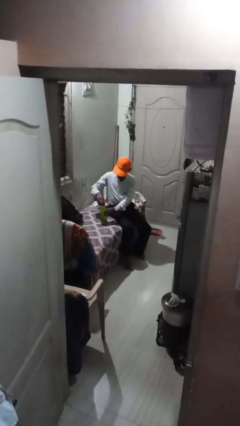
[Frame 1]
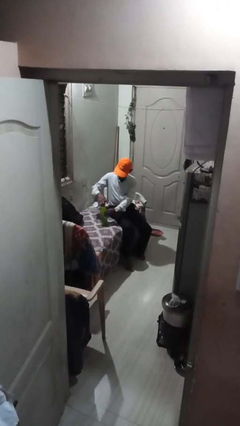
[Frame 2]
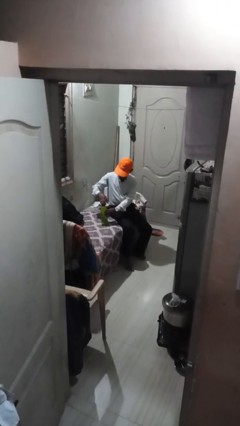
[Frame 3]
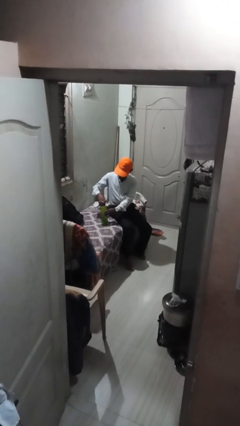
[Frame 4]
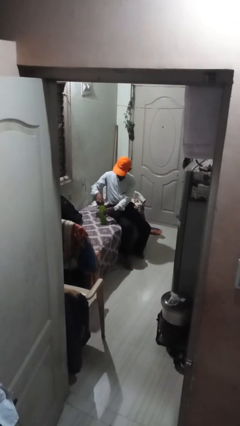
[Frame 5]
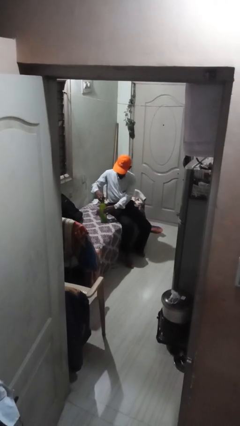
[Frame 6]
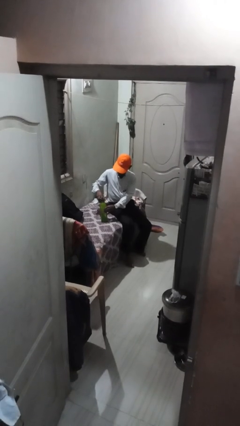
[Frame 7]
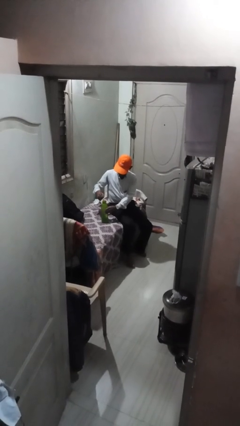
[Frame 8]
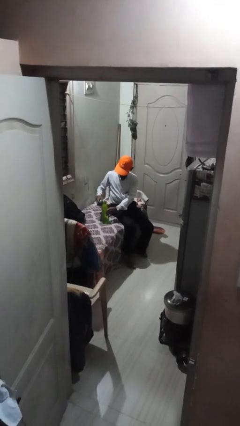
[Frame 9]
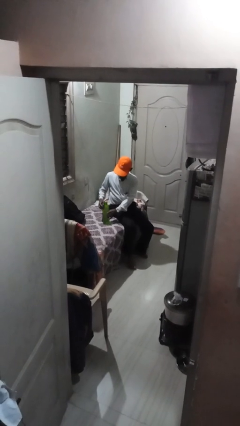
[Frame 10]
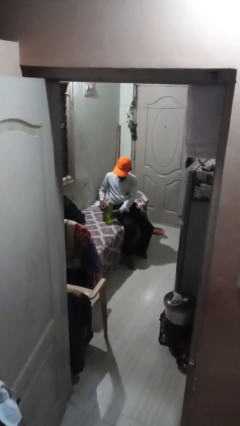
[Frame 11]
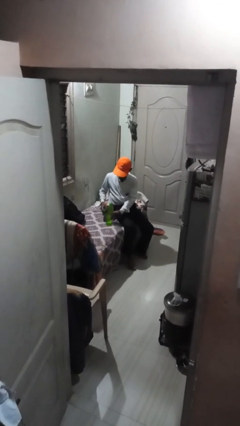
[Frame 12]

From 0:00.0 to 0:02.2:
person unscrews lid from bottle

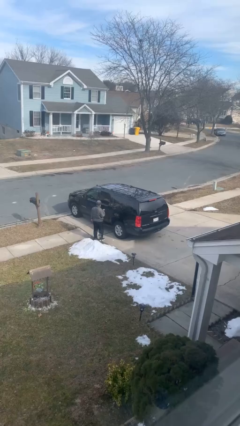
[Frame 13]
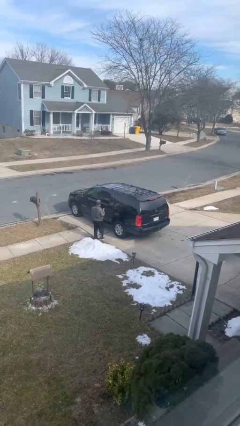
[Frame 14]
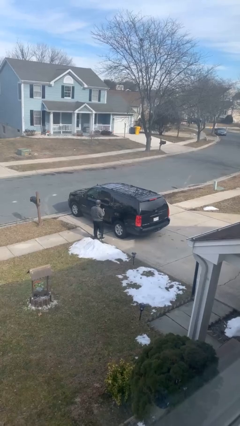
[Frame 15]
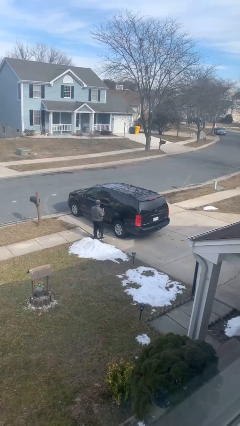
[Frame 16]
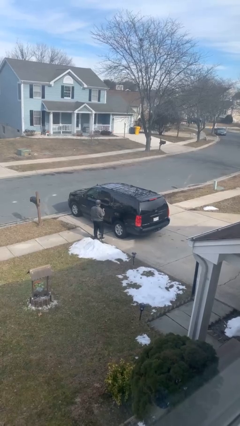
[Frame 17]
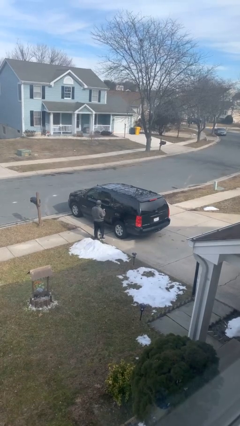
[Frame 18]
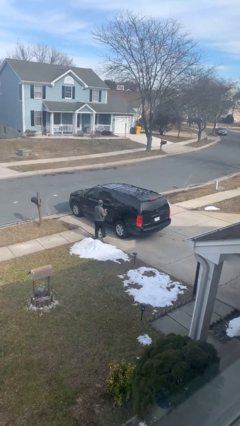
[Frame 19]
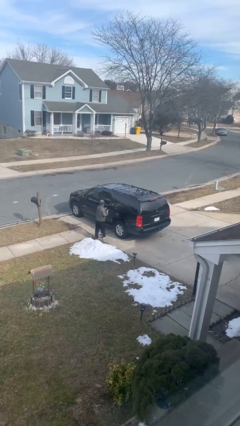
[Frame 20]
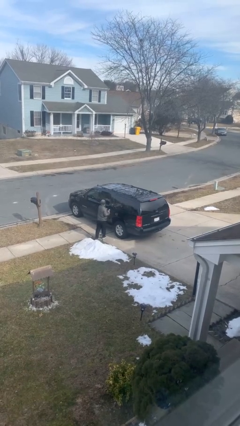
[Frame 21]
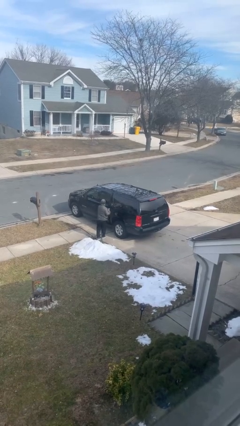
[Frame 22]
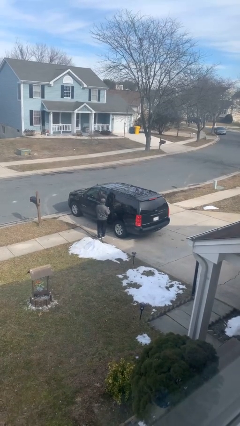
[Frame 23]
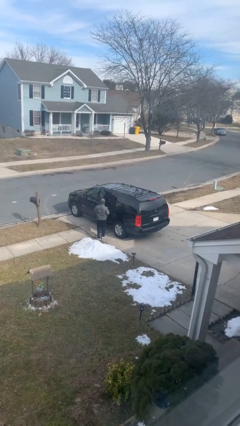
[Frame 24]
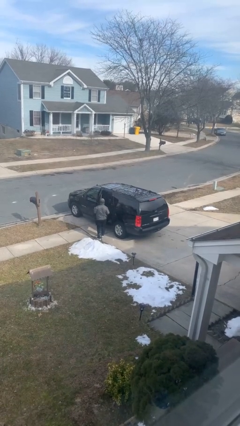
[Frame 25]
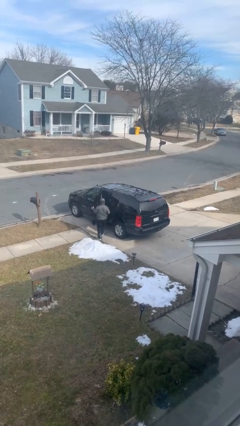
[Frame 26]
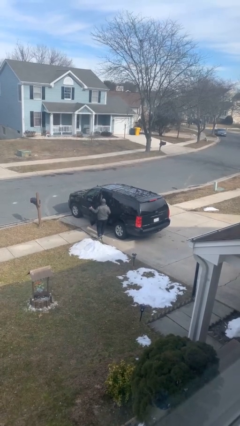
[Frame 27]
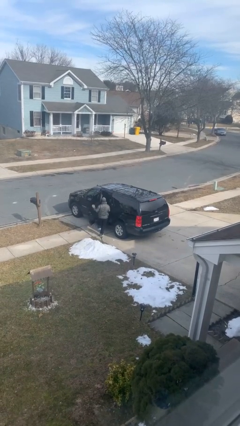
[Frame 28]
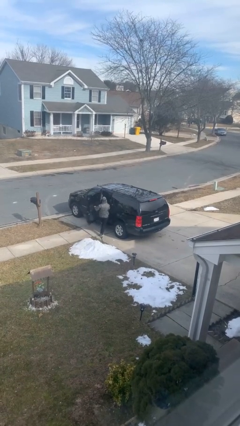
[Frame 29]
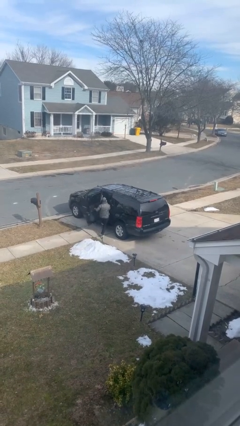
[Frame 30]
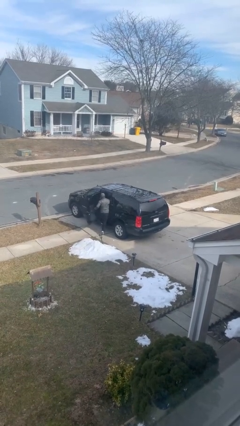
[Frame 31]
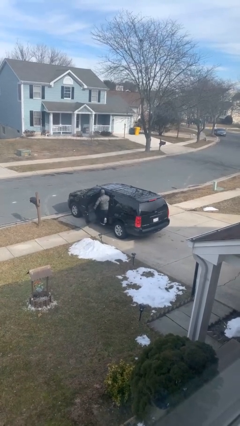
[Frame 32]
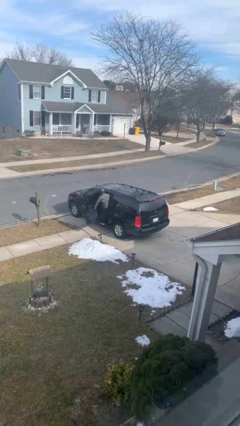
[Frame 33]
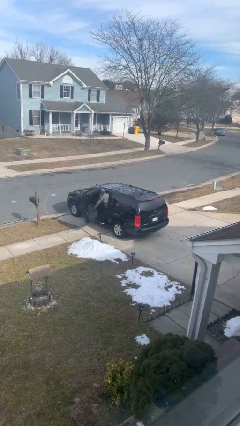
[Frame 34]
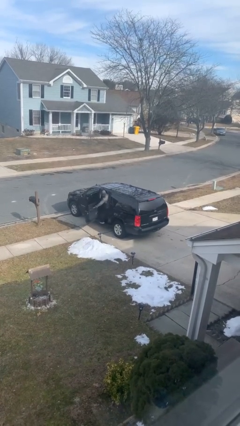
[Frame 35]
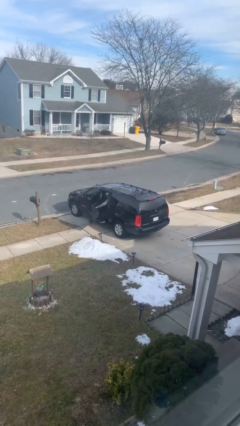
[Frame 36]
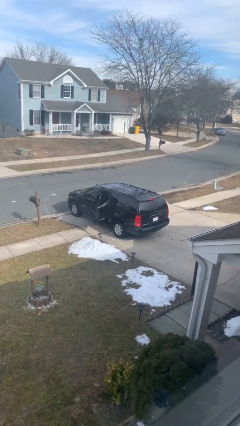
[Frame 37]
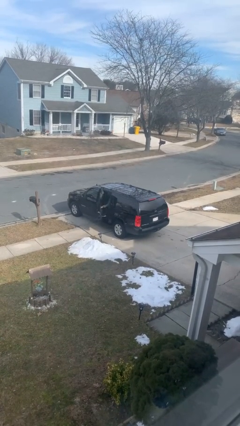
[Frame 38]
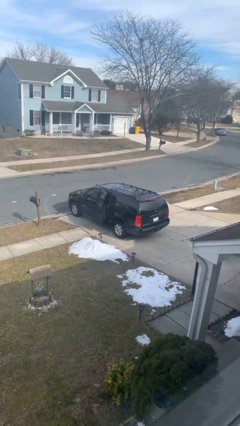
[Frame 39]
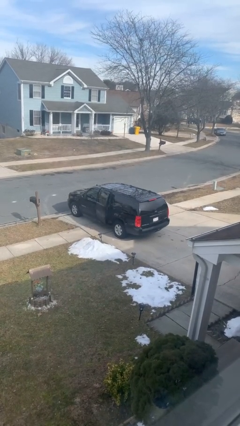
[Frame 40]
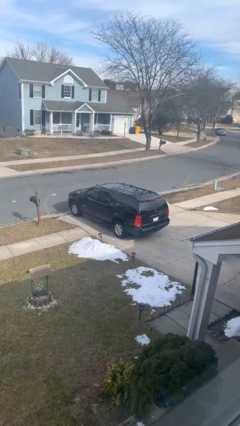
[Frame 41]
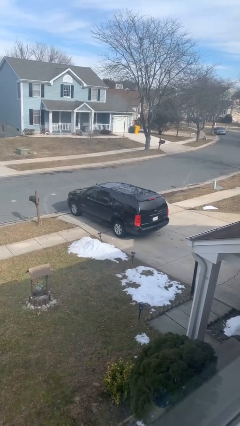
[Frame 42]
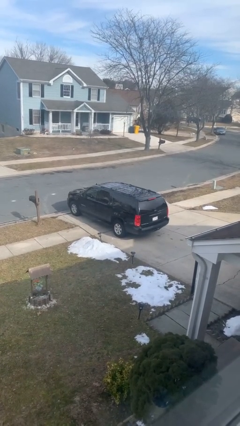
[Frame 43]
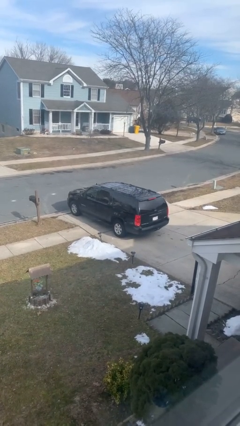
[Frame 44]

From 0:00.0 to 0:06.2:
car picks up person

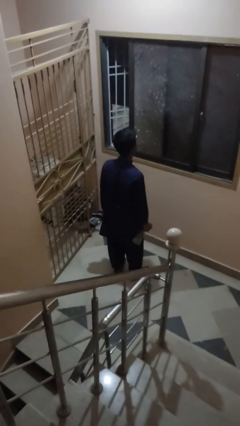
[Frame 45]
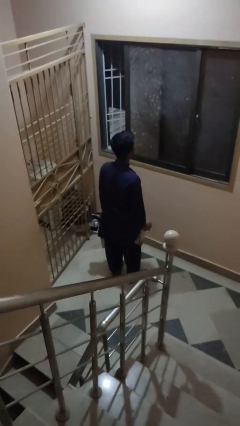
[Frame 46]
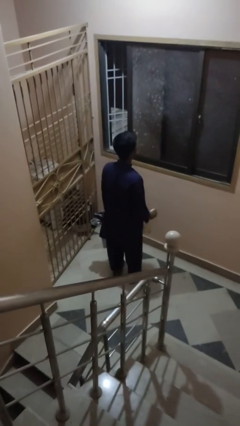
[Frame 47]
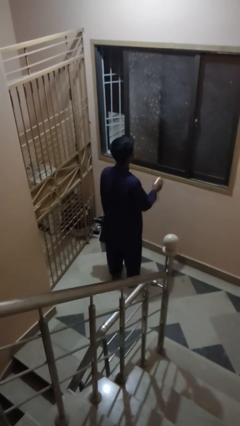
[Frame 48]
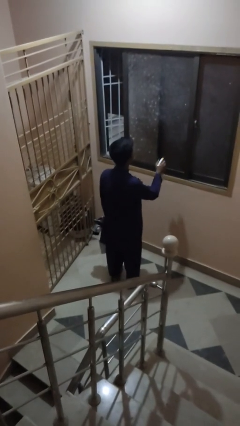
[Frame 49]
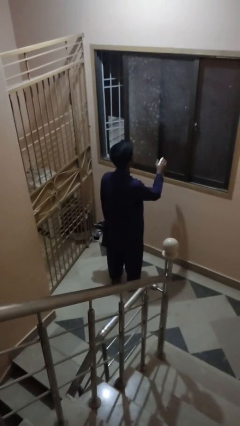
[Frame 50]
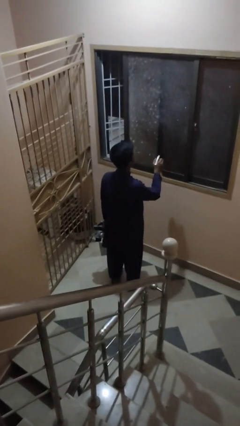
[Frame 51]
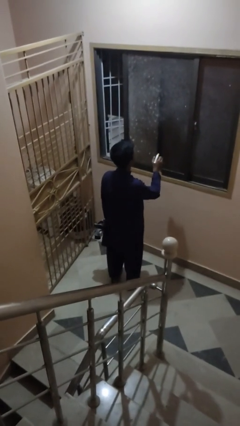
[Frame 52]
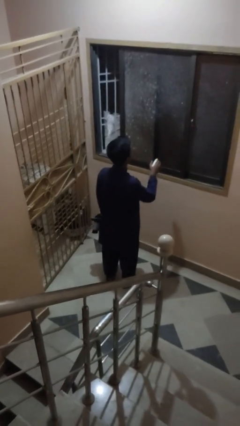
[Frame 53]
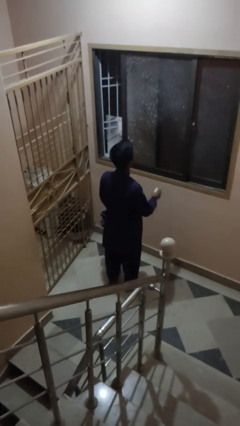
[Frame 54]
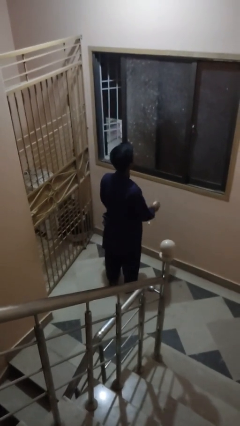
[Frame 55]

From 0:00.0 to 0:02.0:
person sprays from bottle

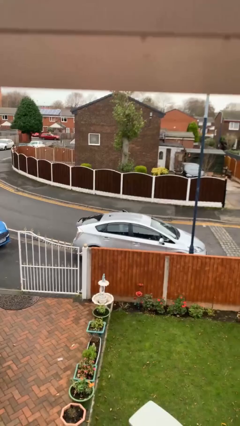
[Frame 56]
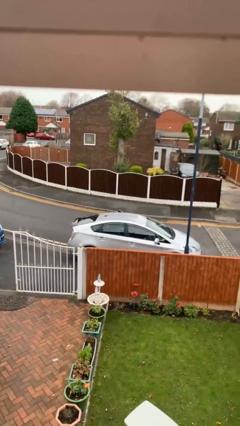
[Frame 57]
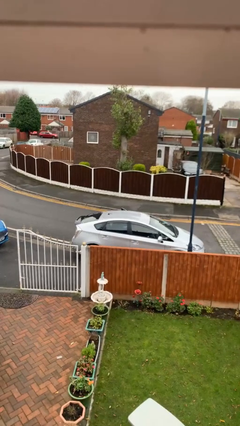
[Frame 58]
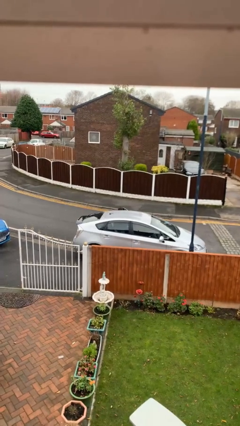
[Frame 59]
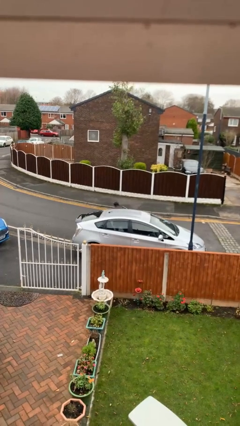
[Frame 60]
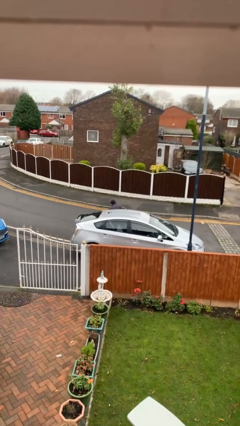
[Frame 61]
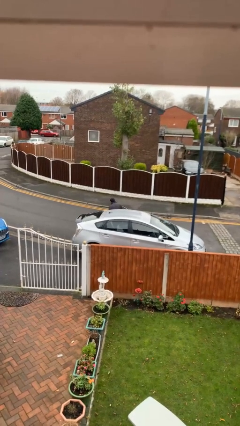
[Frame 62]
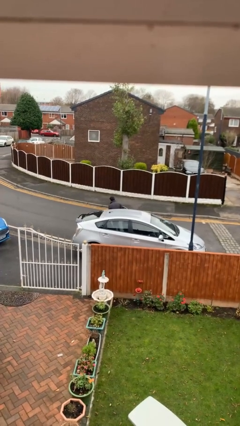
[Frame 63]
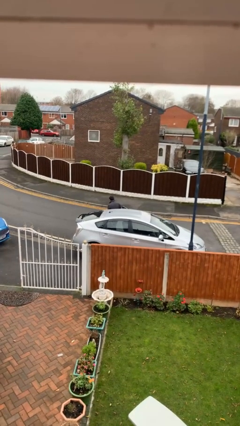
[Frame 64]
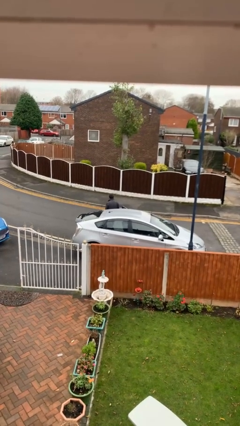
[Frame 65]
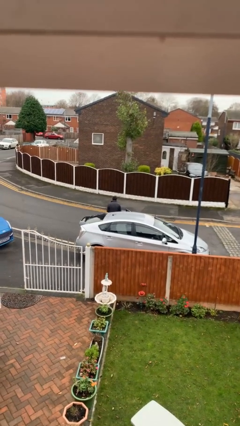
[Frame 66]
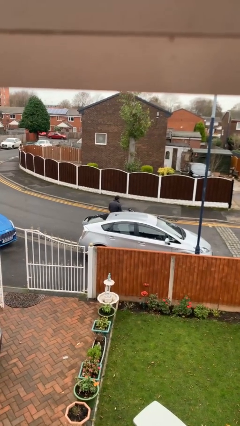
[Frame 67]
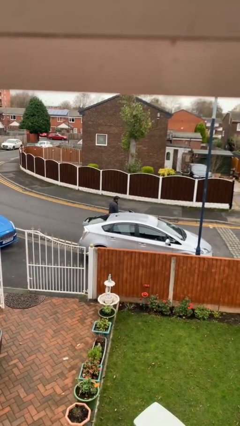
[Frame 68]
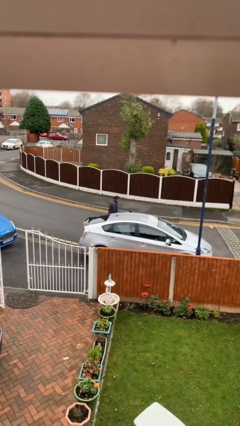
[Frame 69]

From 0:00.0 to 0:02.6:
person exits car

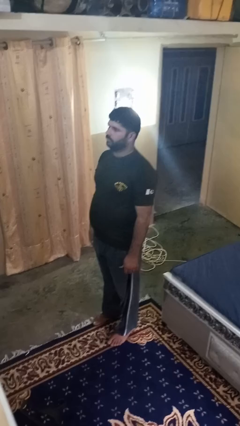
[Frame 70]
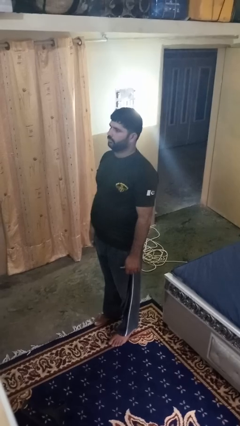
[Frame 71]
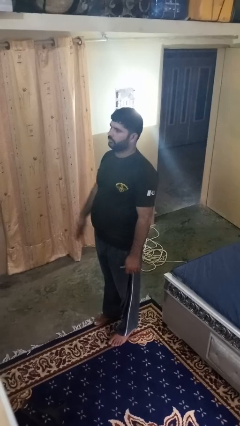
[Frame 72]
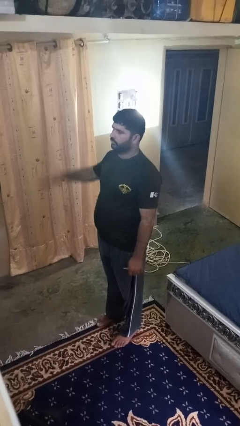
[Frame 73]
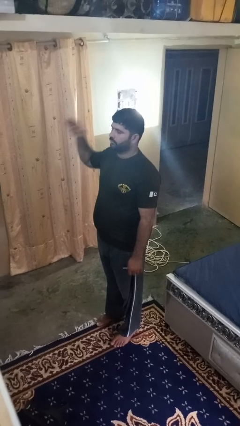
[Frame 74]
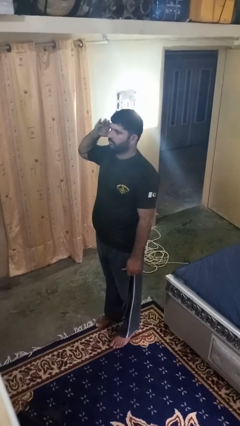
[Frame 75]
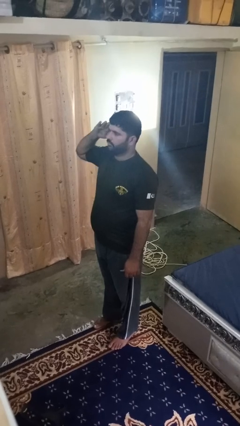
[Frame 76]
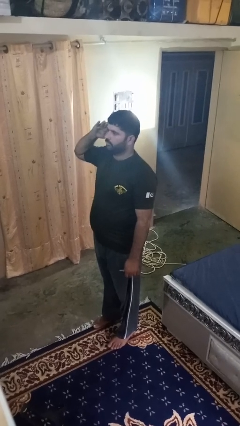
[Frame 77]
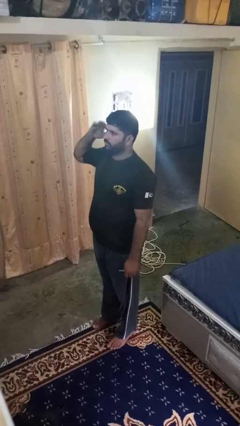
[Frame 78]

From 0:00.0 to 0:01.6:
person salutes

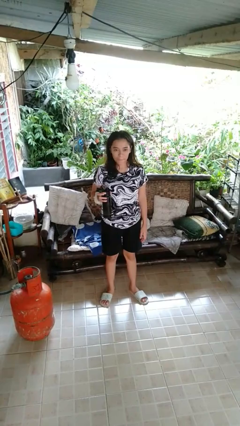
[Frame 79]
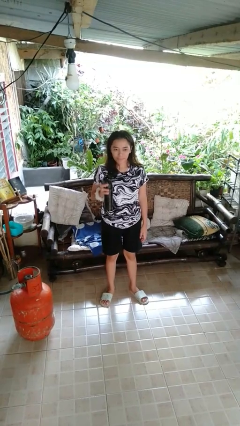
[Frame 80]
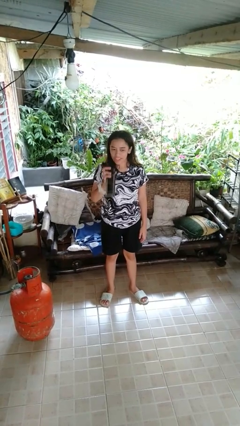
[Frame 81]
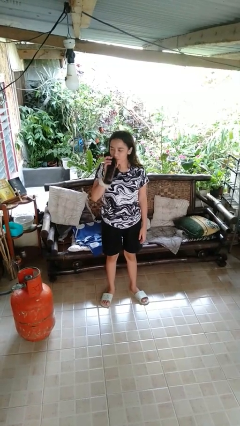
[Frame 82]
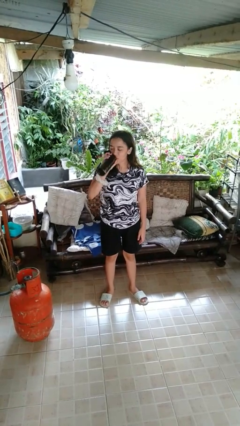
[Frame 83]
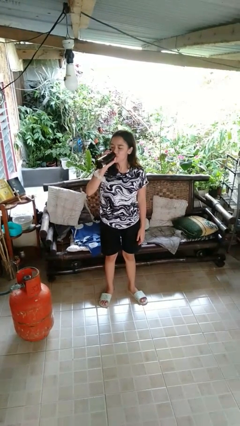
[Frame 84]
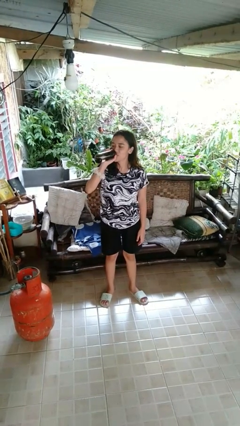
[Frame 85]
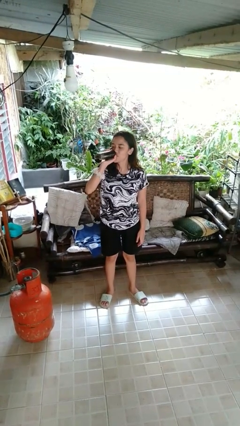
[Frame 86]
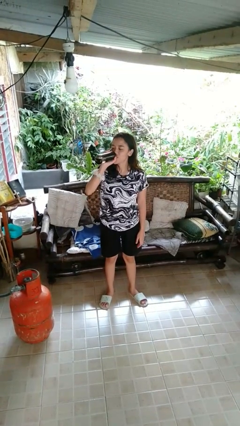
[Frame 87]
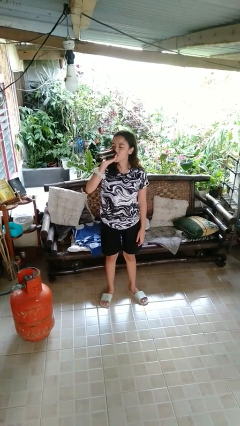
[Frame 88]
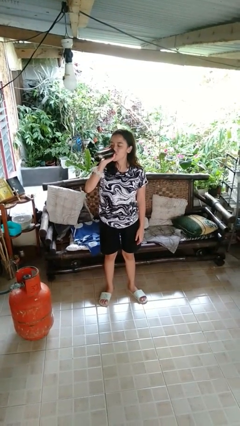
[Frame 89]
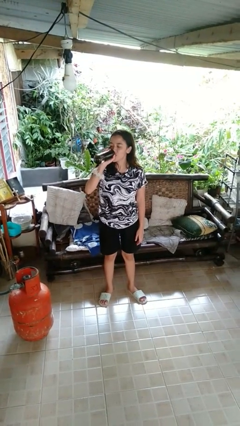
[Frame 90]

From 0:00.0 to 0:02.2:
person drinks from bottle

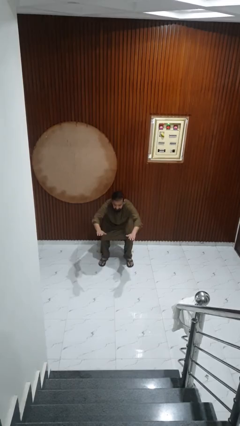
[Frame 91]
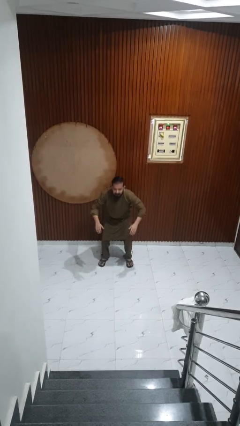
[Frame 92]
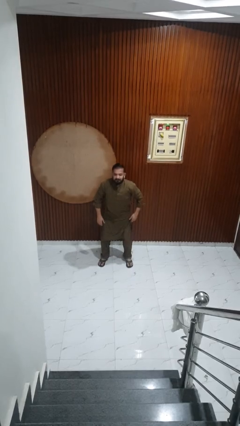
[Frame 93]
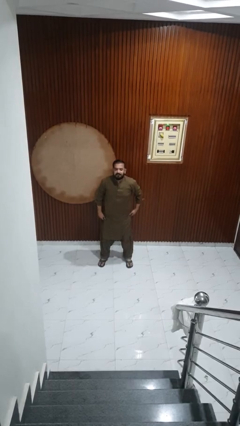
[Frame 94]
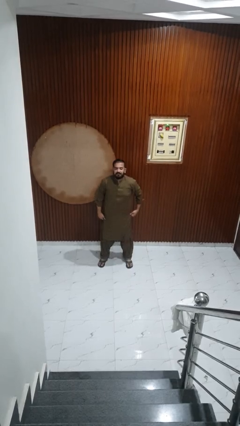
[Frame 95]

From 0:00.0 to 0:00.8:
person stands up
